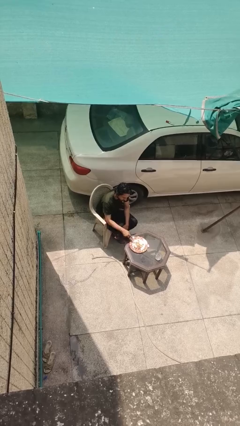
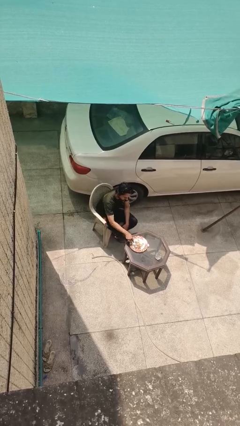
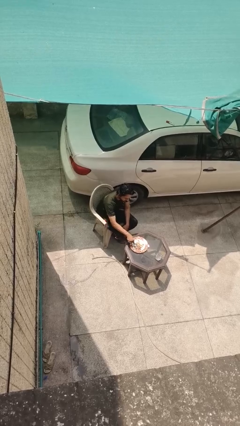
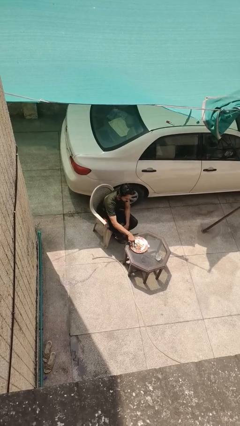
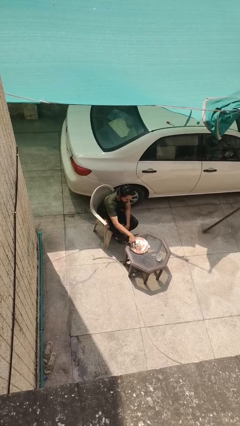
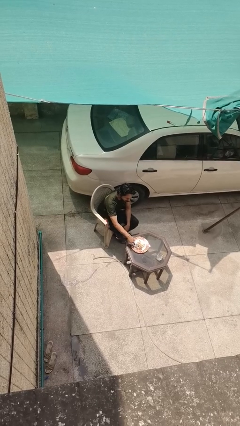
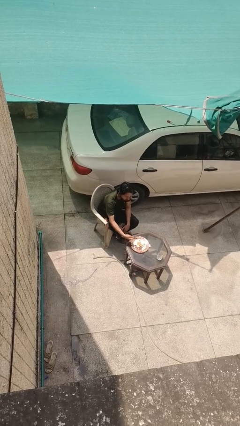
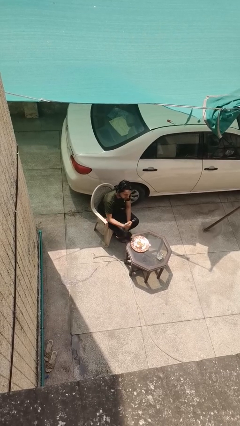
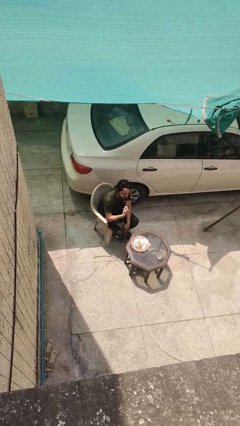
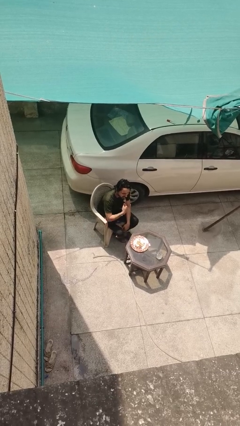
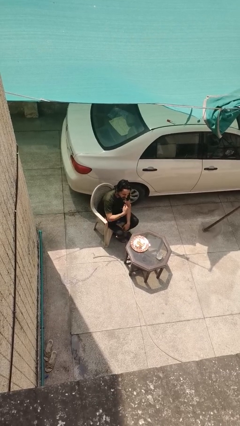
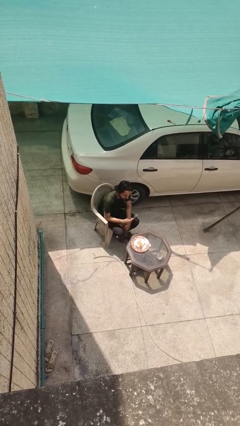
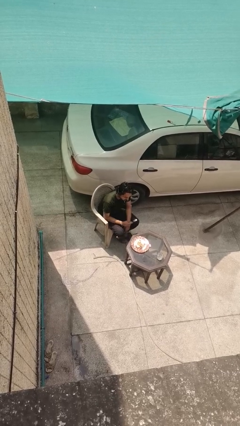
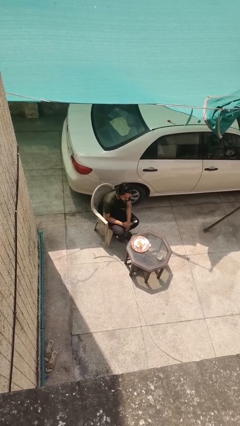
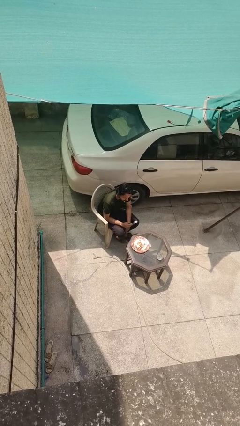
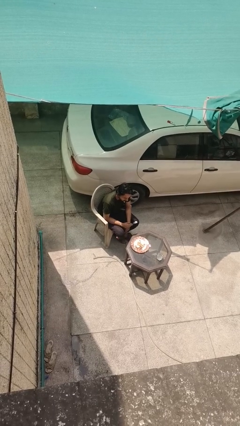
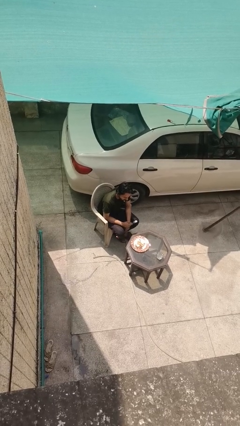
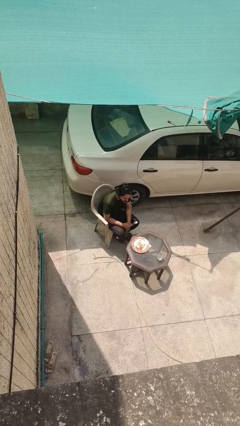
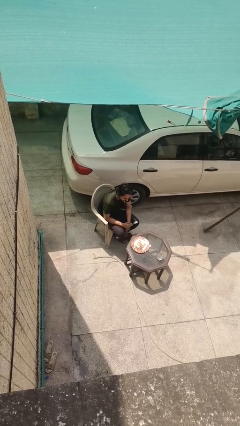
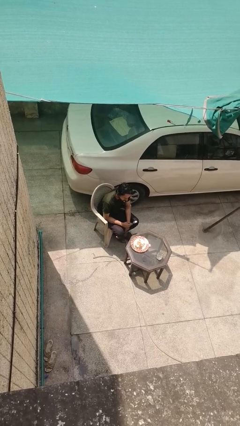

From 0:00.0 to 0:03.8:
person eats with utensil

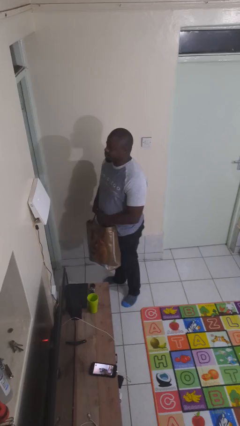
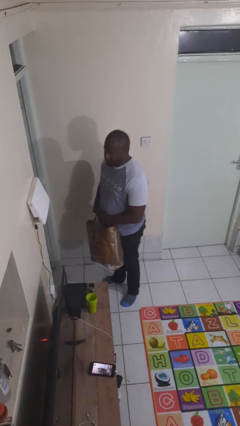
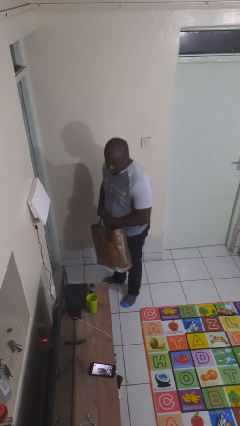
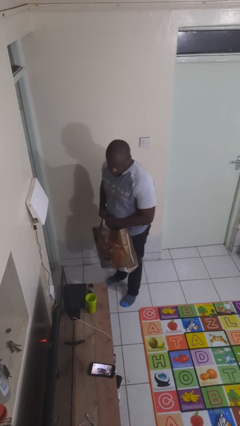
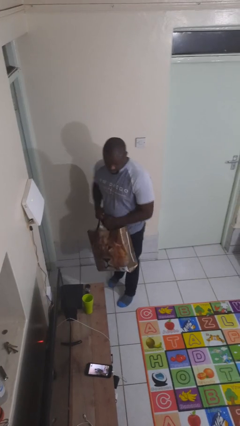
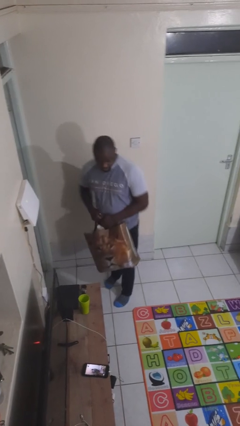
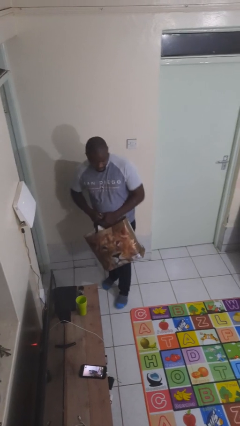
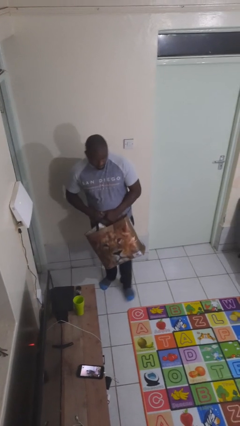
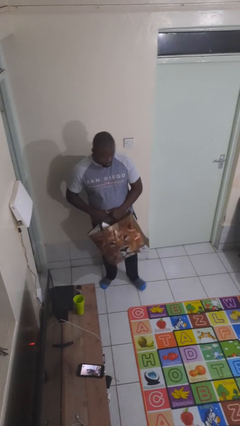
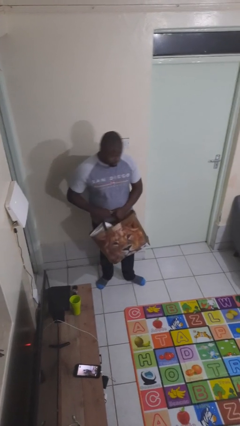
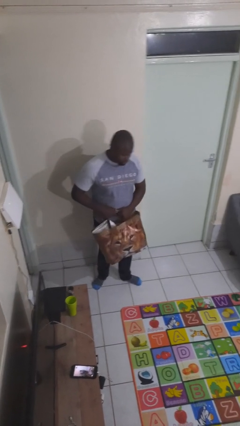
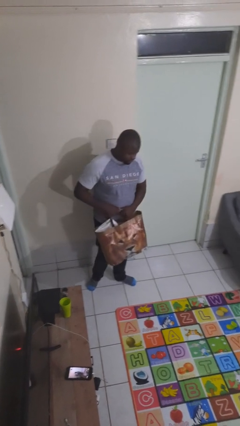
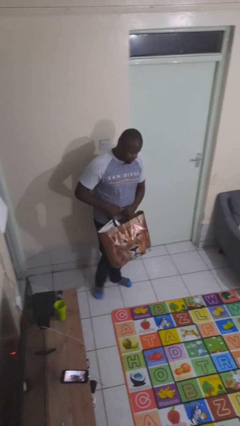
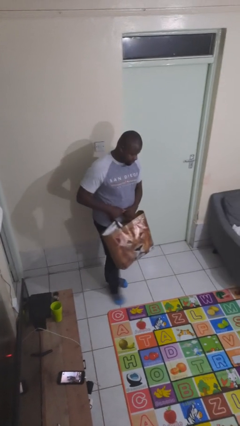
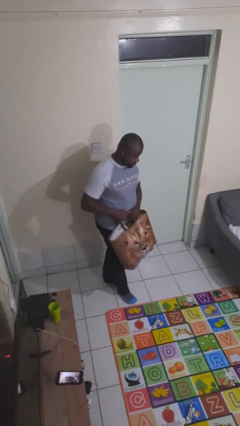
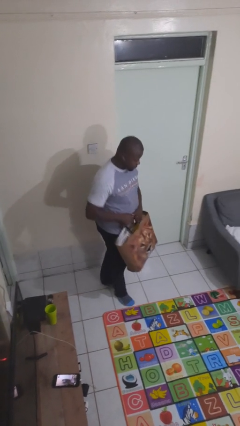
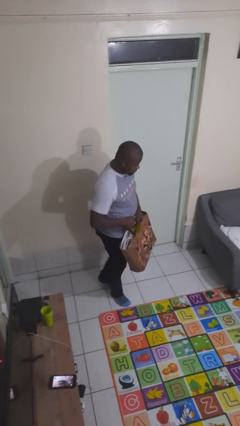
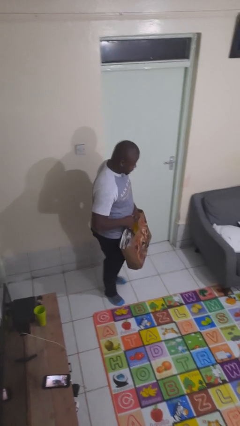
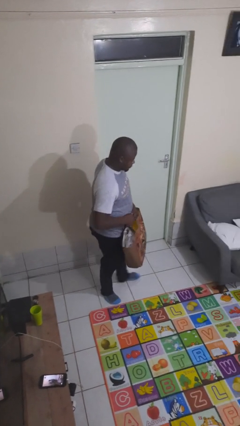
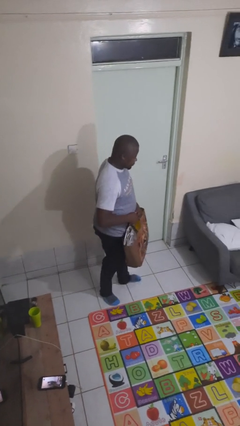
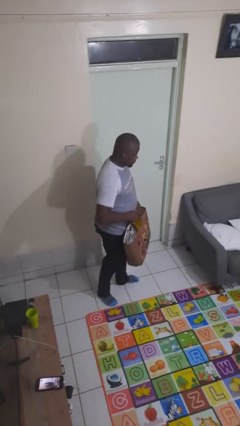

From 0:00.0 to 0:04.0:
person carries groceries

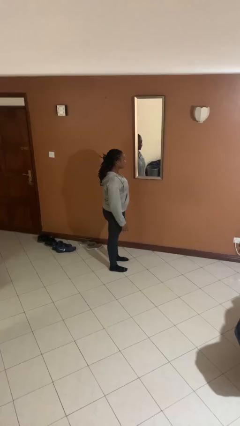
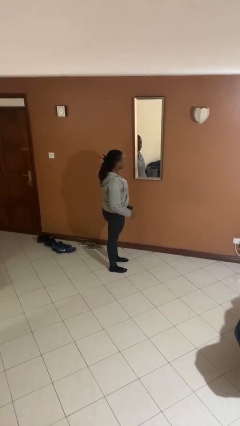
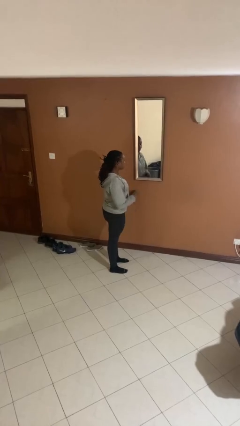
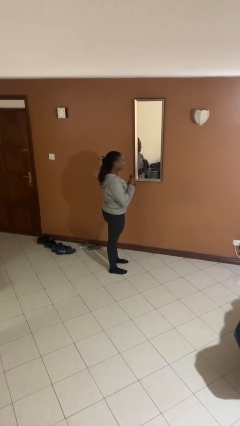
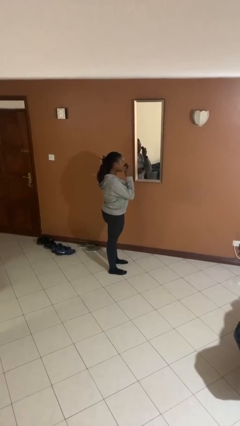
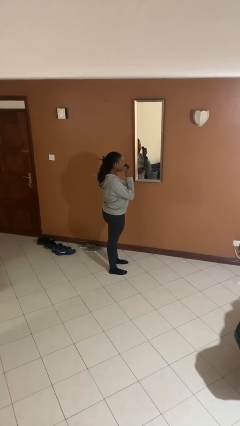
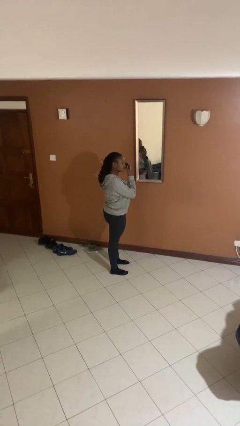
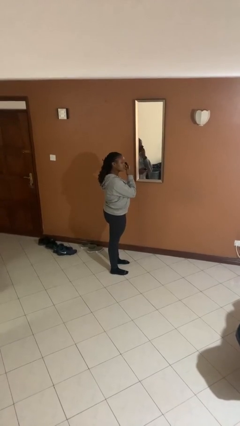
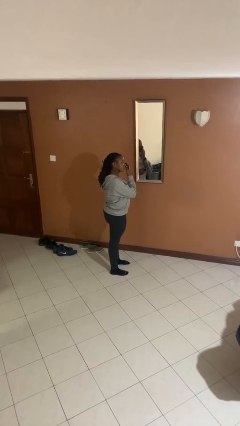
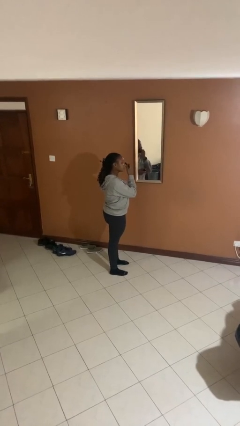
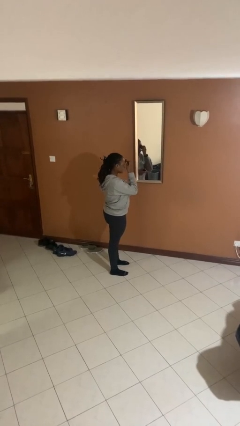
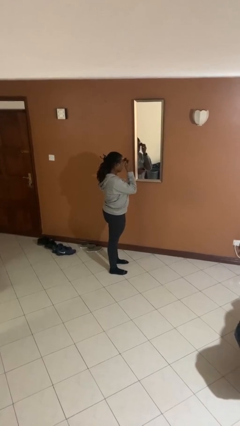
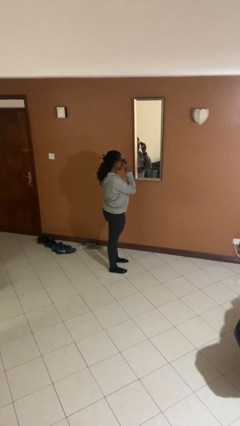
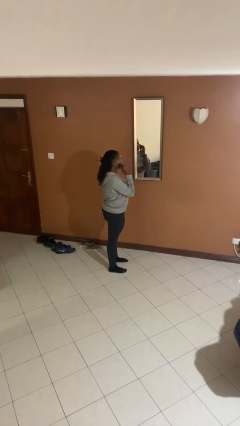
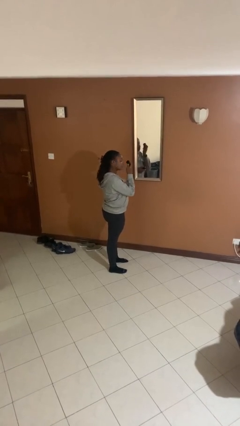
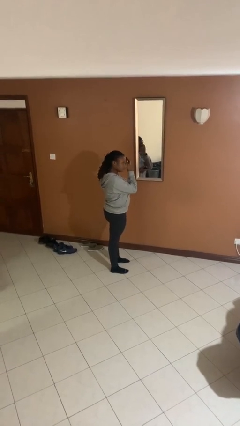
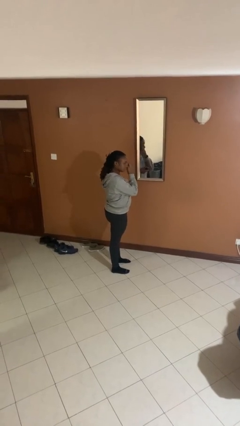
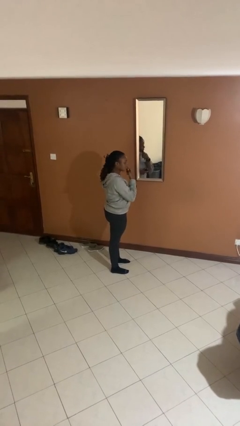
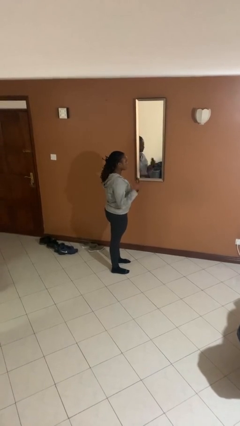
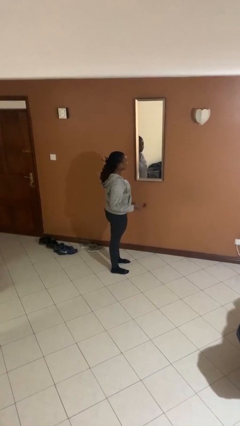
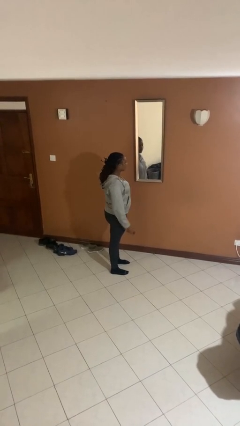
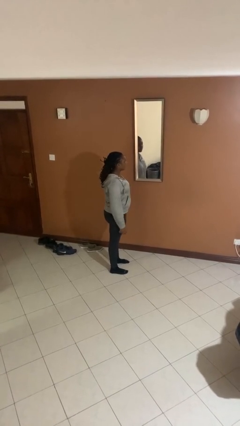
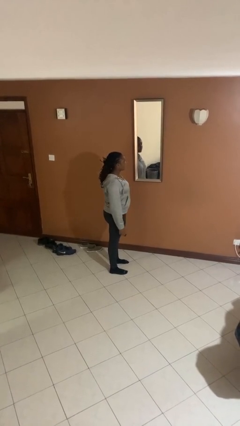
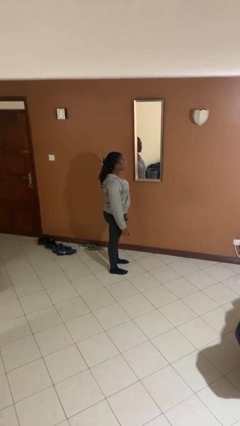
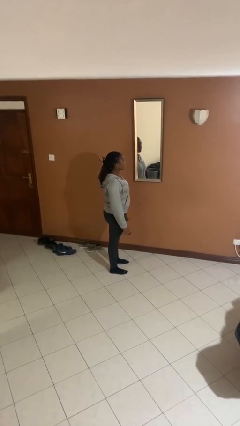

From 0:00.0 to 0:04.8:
person applies foundation makeup

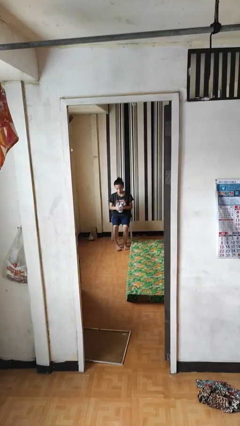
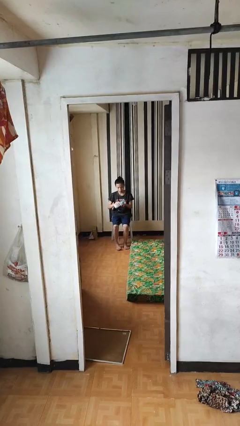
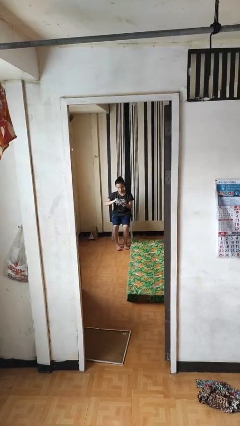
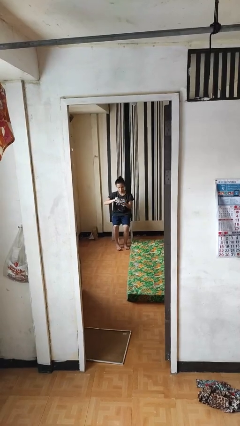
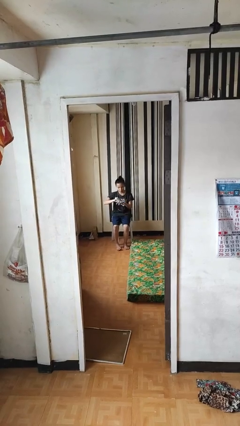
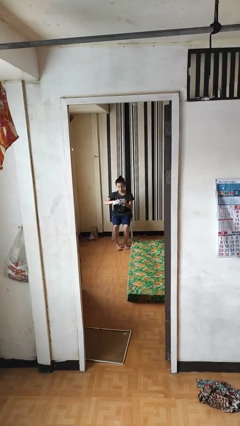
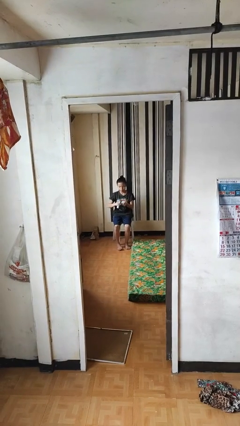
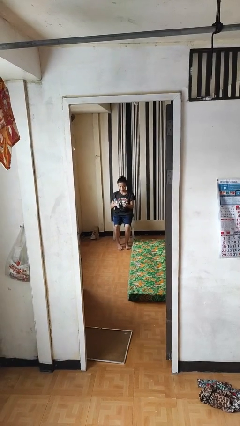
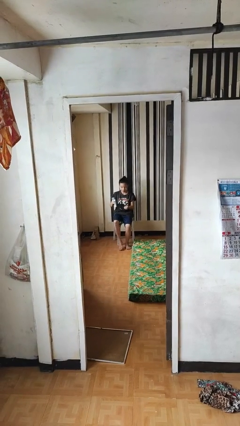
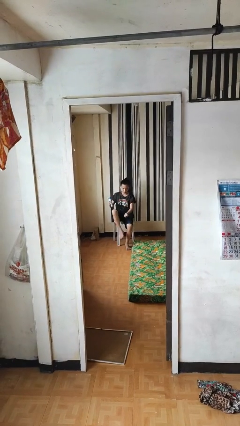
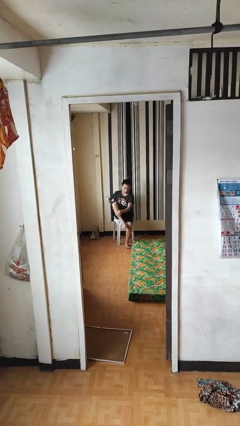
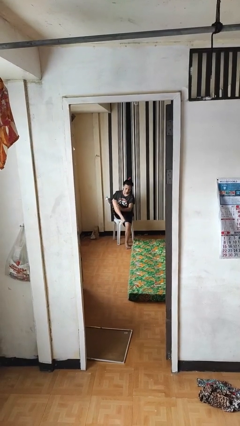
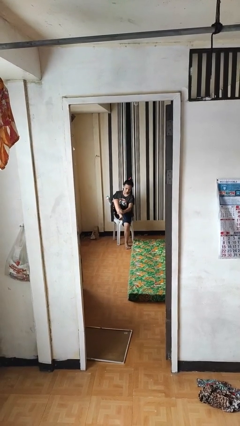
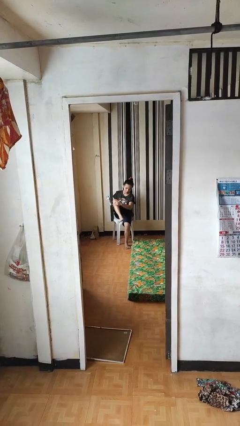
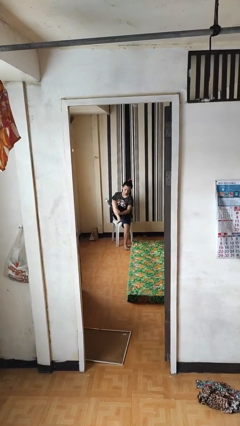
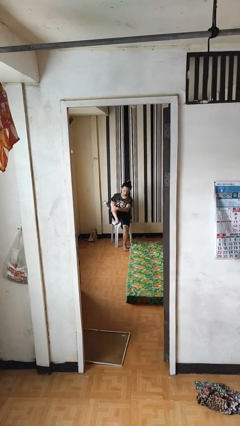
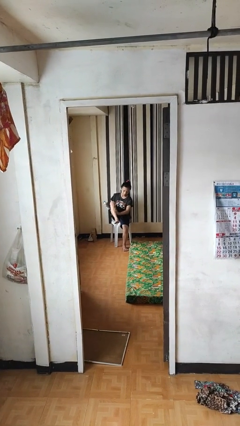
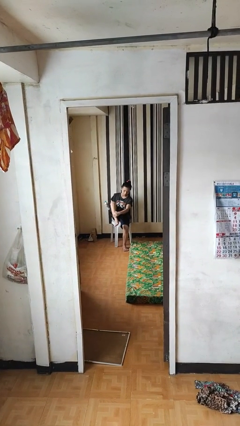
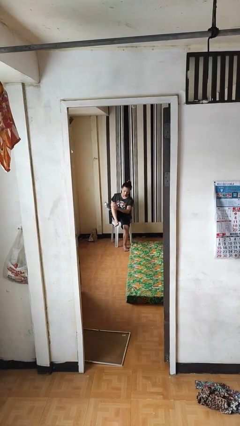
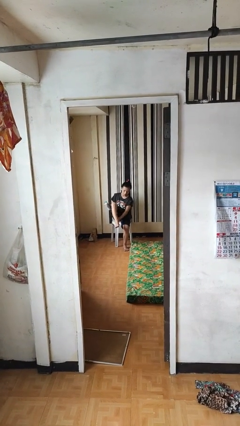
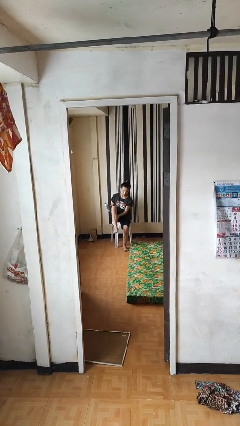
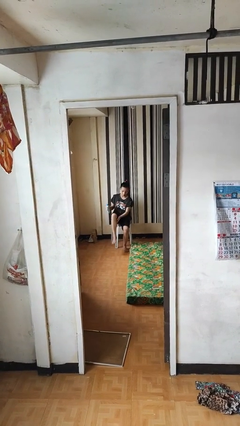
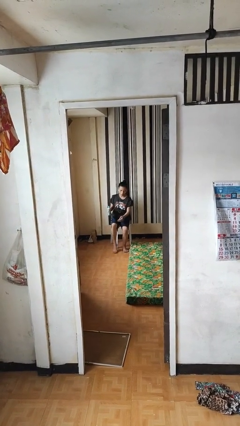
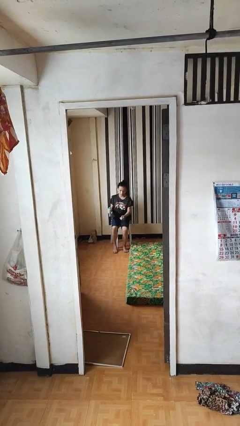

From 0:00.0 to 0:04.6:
person applies sunscreen

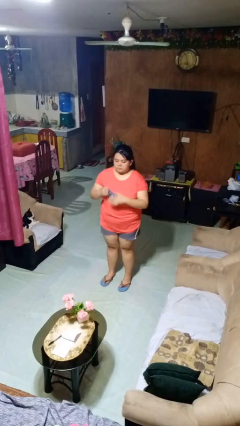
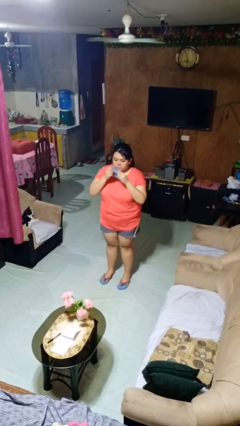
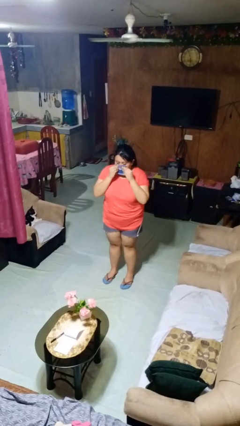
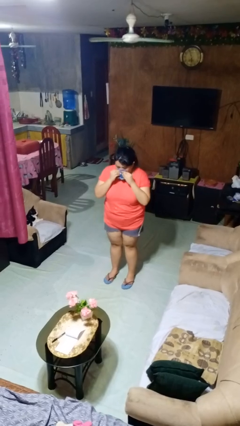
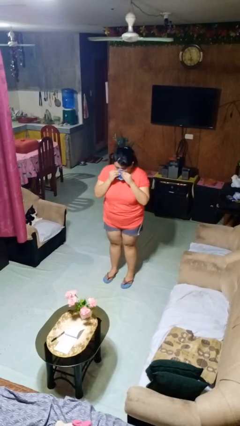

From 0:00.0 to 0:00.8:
person blows nose
